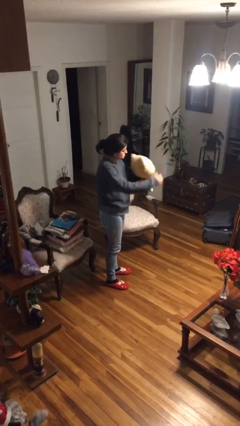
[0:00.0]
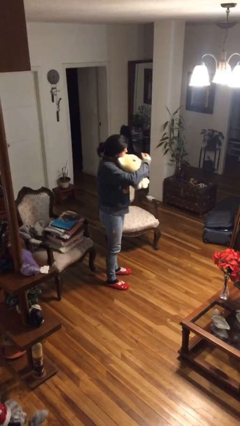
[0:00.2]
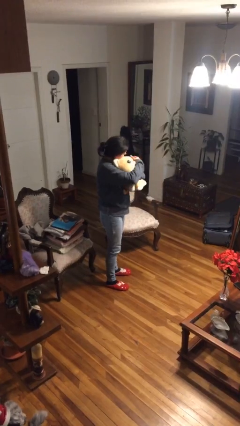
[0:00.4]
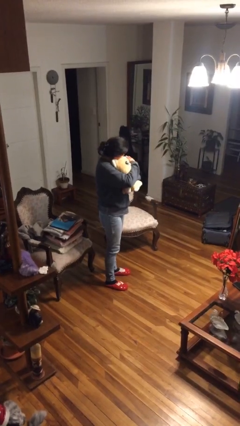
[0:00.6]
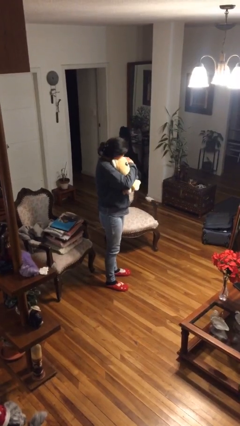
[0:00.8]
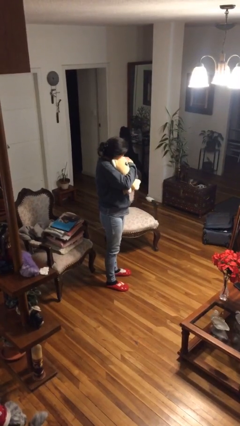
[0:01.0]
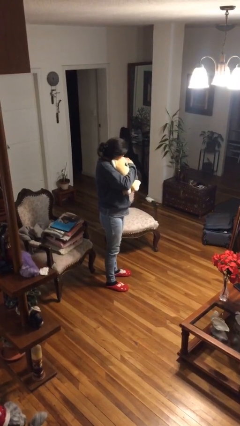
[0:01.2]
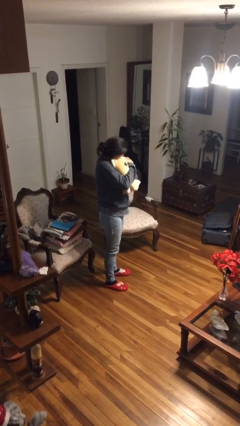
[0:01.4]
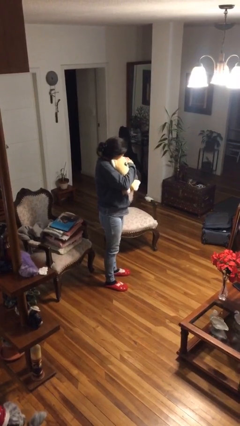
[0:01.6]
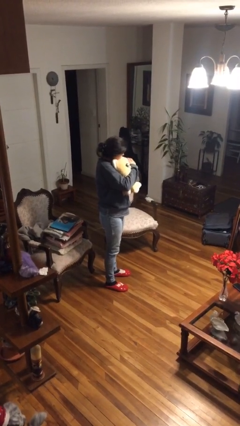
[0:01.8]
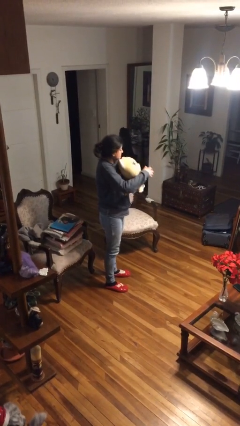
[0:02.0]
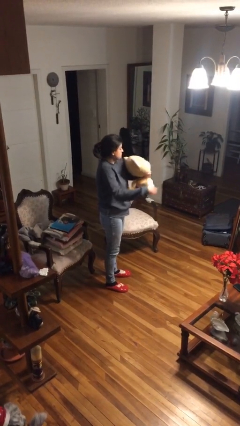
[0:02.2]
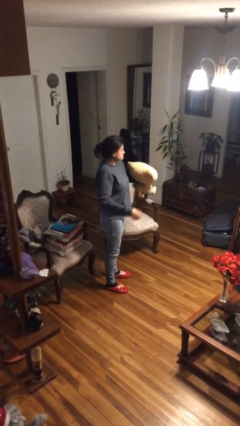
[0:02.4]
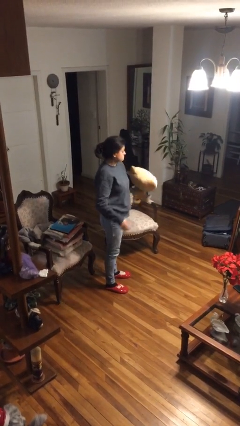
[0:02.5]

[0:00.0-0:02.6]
person hugs stuffed animal

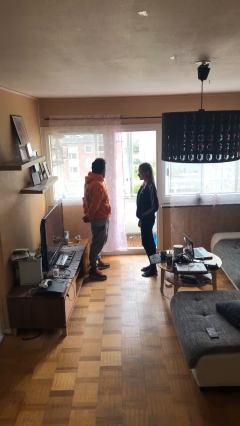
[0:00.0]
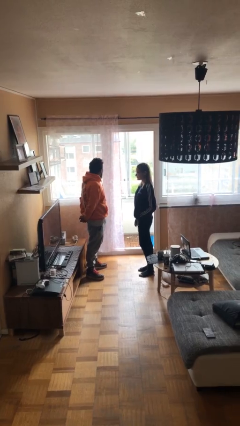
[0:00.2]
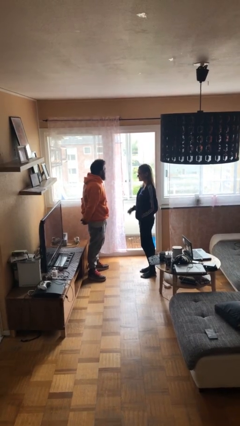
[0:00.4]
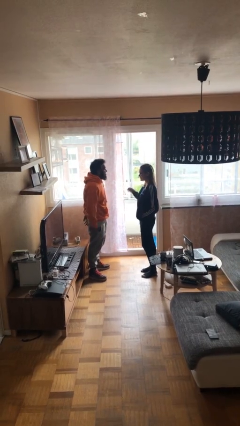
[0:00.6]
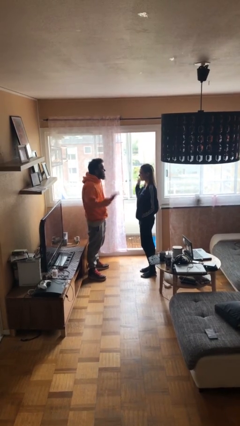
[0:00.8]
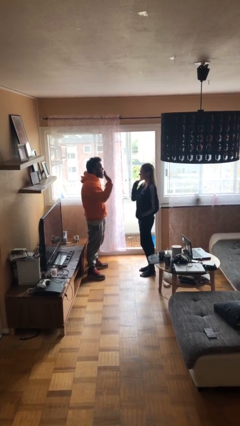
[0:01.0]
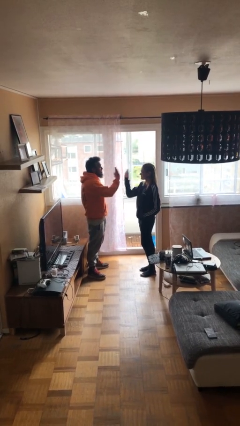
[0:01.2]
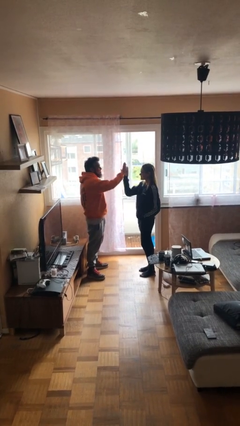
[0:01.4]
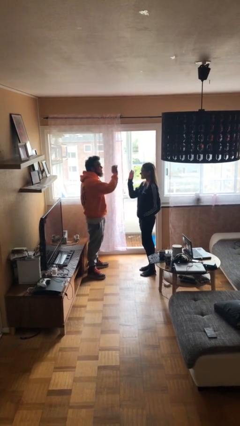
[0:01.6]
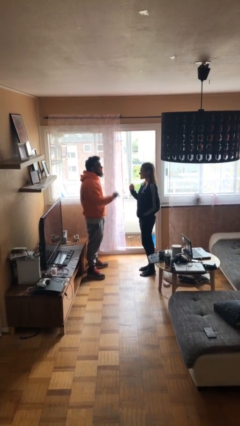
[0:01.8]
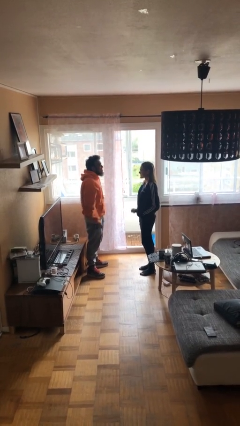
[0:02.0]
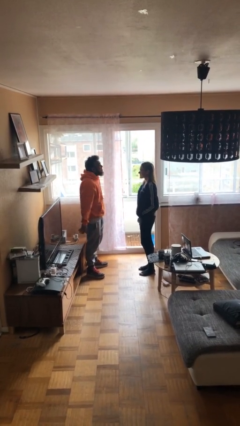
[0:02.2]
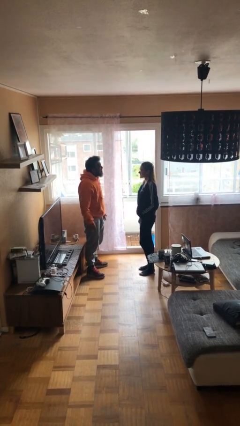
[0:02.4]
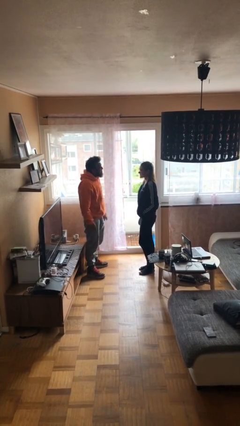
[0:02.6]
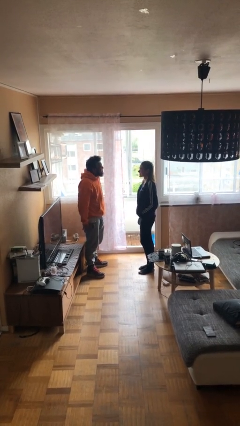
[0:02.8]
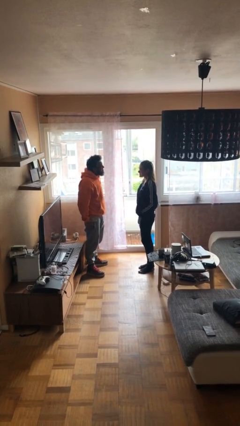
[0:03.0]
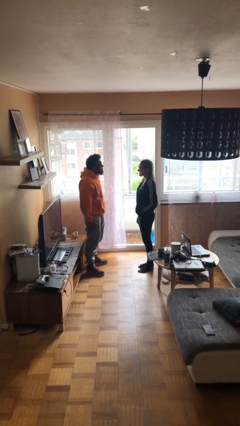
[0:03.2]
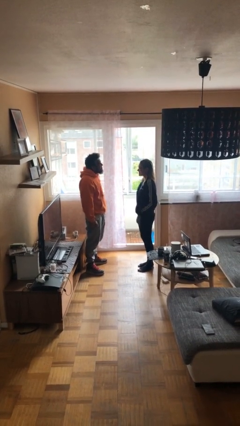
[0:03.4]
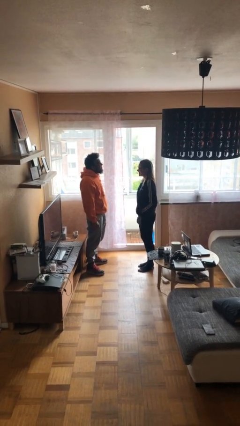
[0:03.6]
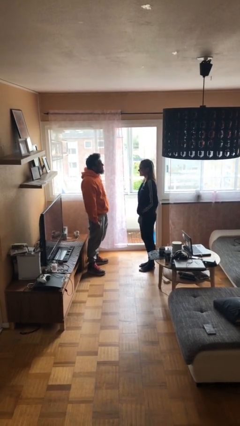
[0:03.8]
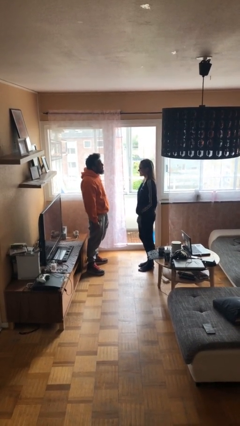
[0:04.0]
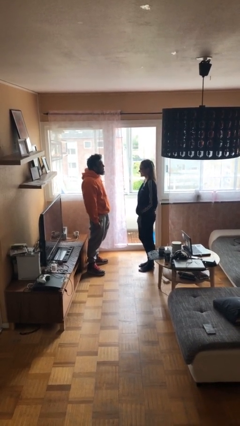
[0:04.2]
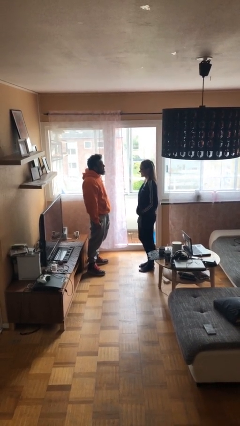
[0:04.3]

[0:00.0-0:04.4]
person highfives hand

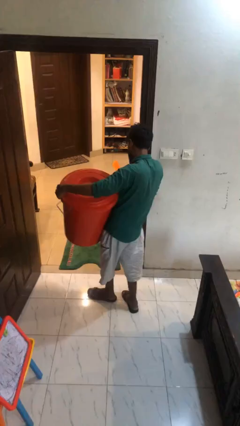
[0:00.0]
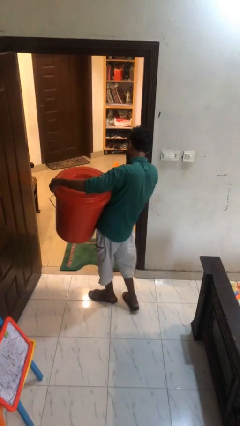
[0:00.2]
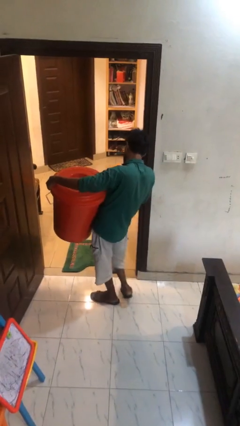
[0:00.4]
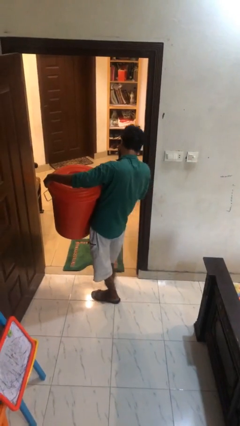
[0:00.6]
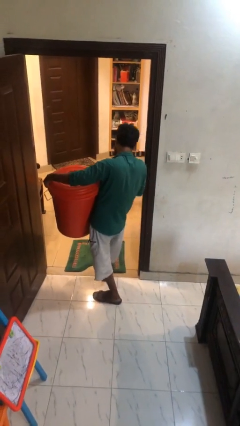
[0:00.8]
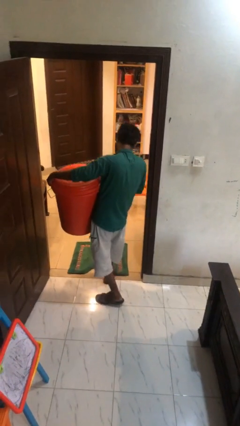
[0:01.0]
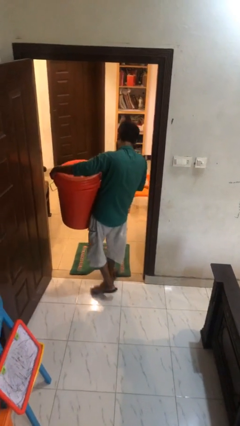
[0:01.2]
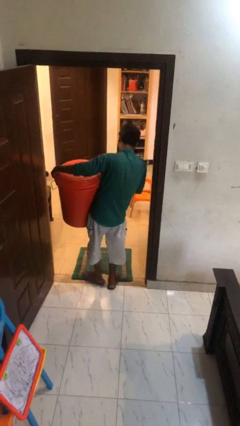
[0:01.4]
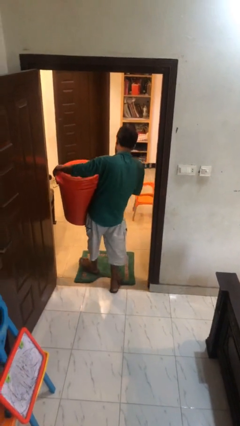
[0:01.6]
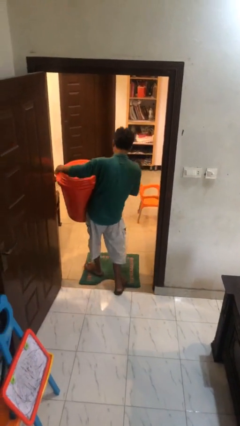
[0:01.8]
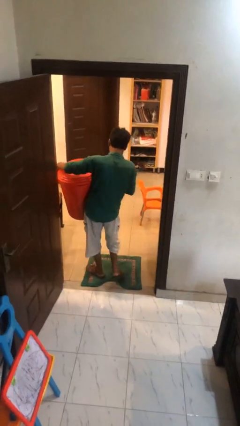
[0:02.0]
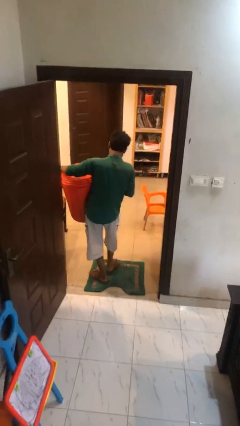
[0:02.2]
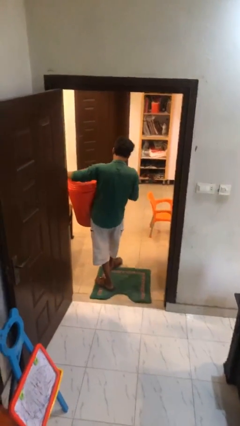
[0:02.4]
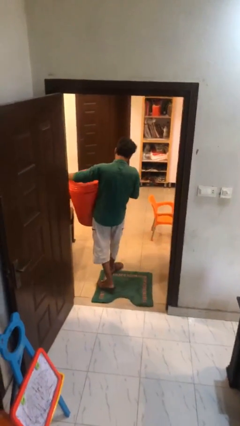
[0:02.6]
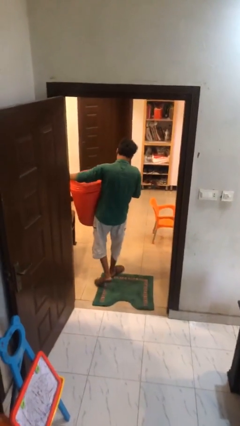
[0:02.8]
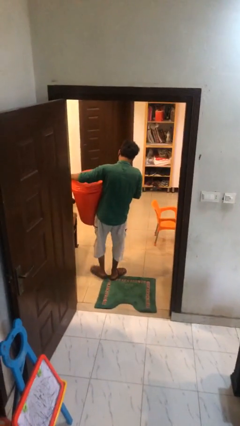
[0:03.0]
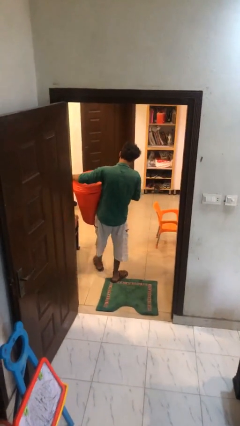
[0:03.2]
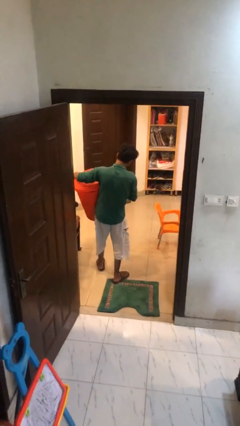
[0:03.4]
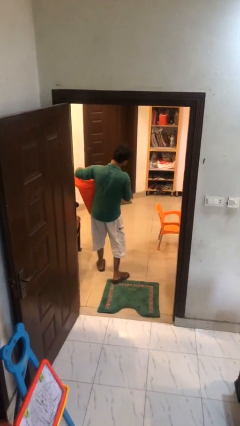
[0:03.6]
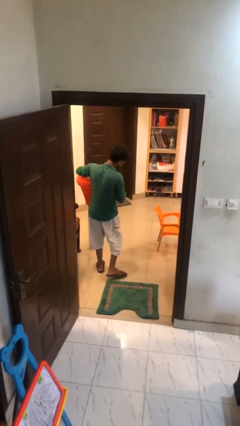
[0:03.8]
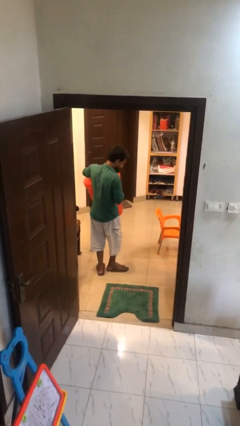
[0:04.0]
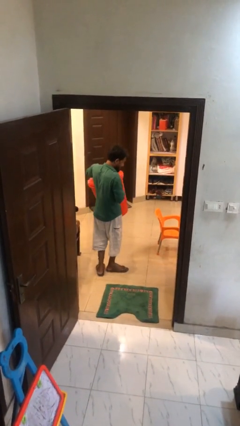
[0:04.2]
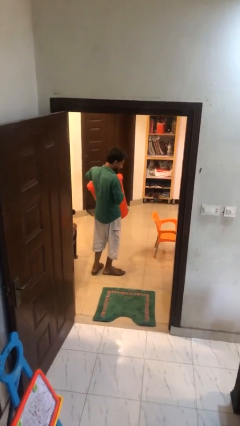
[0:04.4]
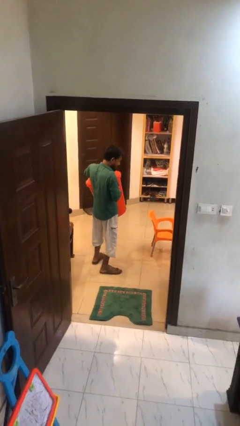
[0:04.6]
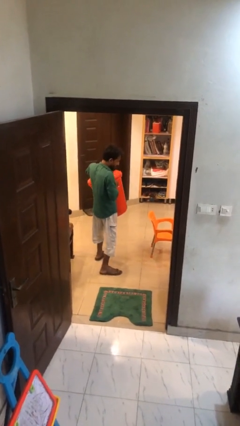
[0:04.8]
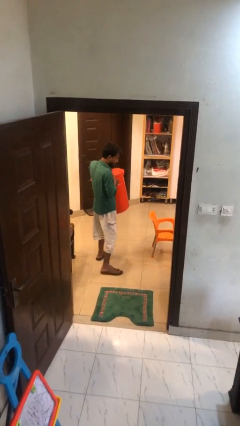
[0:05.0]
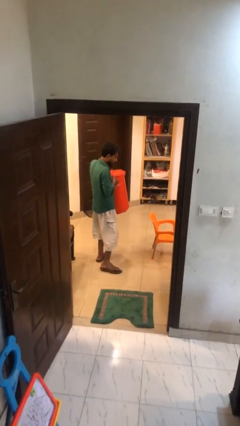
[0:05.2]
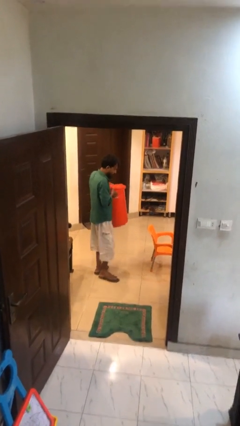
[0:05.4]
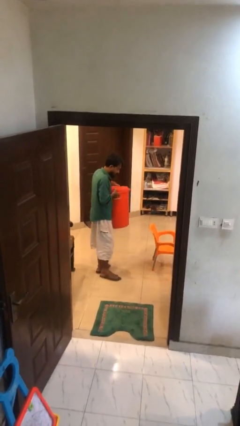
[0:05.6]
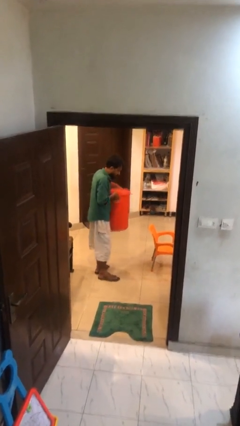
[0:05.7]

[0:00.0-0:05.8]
person carries heavy object

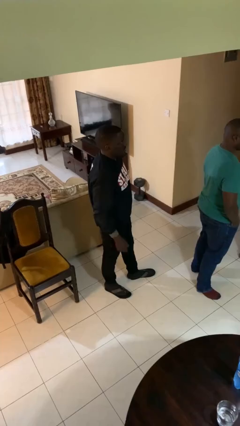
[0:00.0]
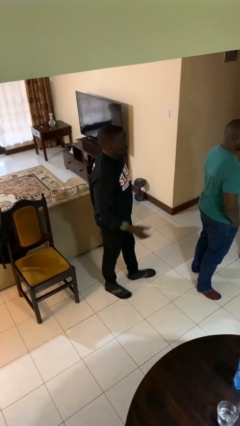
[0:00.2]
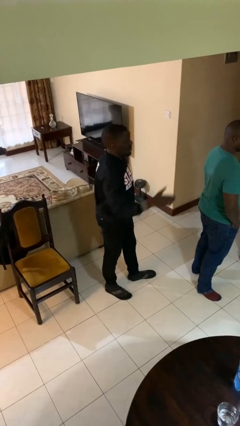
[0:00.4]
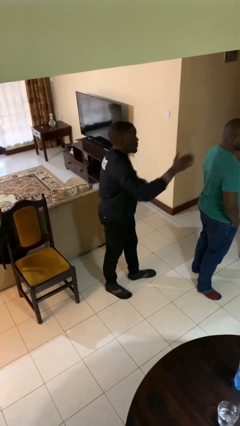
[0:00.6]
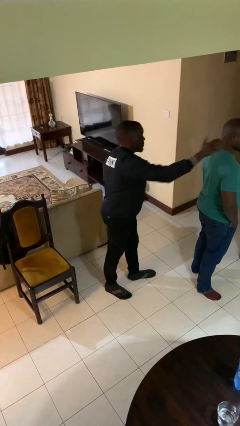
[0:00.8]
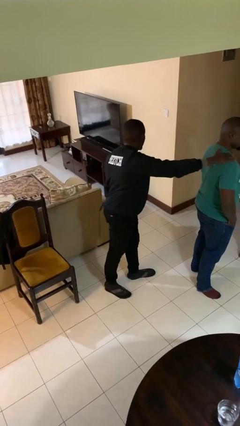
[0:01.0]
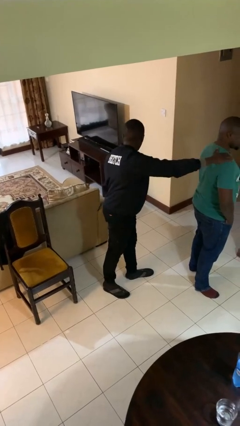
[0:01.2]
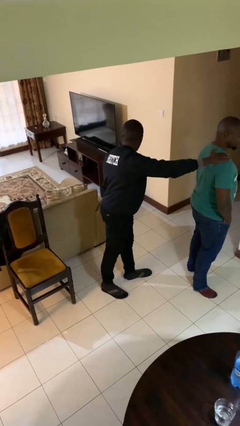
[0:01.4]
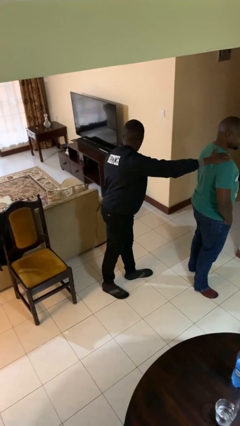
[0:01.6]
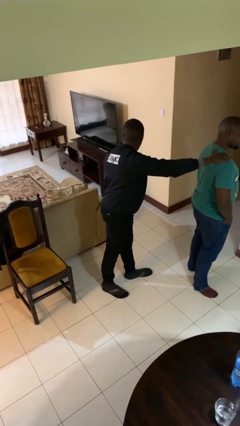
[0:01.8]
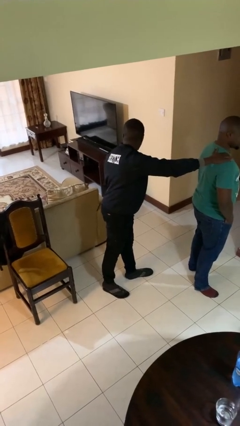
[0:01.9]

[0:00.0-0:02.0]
person grabs person by shoulder

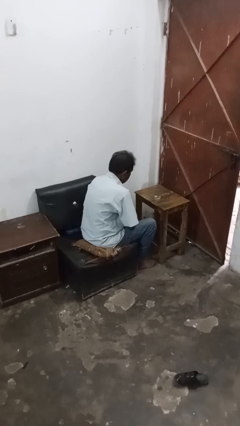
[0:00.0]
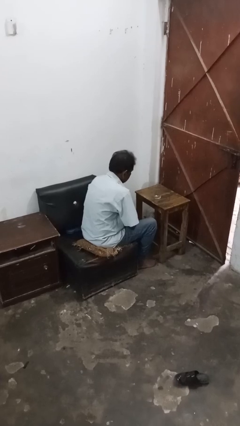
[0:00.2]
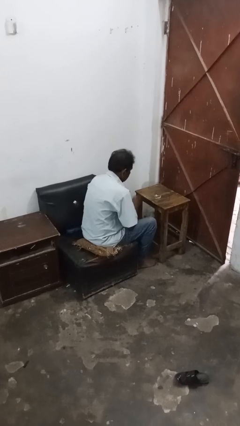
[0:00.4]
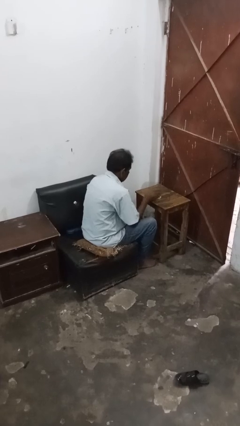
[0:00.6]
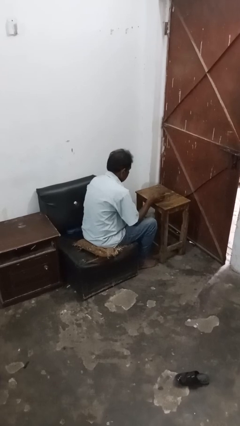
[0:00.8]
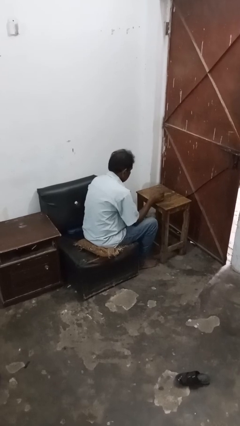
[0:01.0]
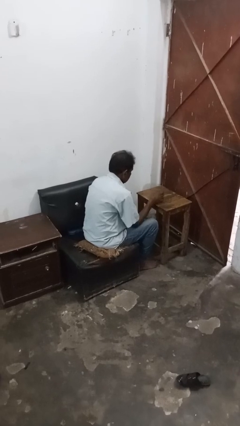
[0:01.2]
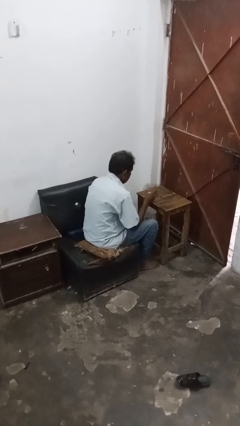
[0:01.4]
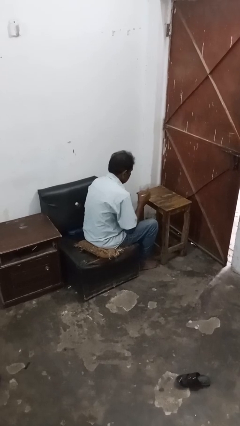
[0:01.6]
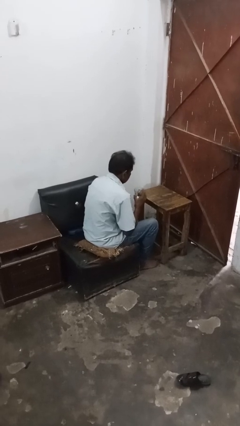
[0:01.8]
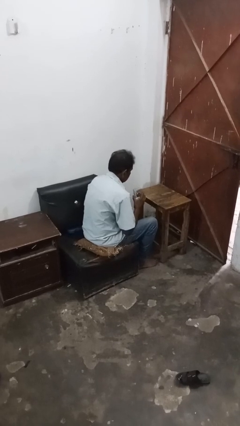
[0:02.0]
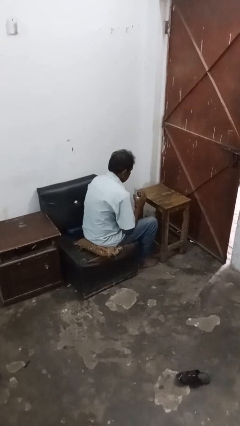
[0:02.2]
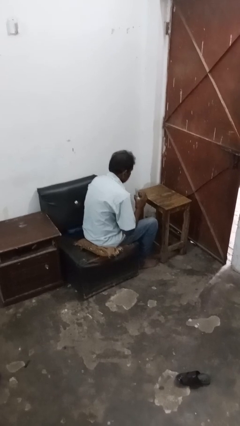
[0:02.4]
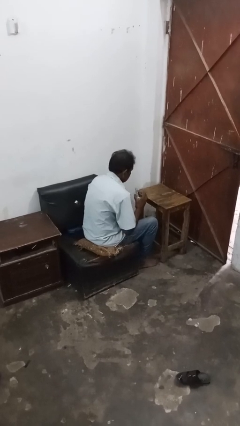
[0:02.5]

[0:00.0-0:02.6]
person picks up object from table
